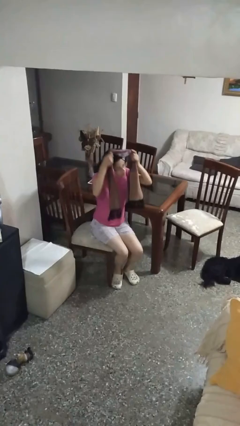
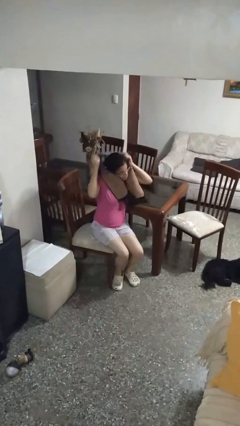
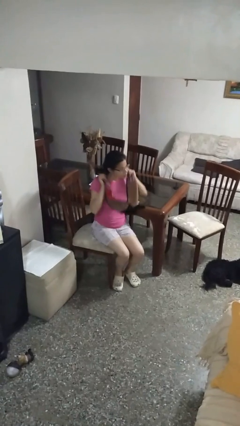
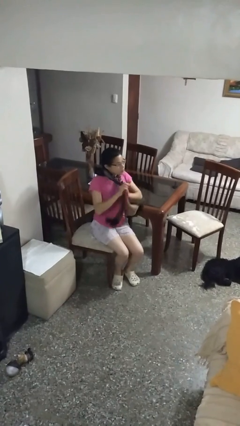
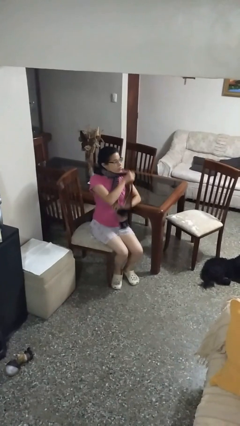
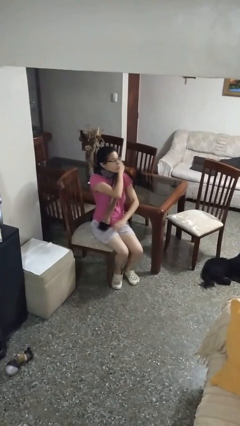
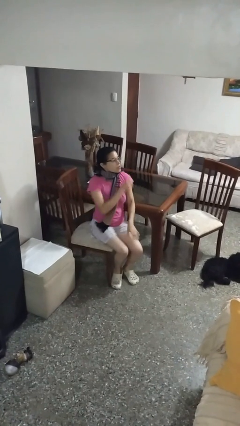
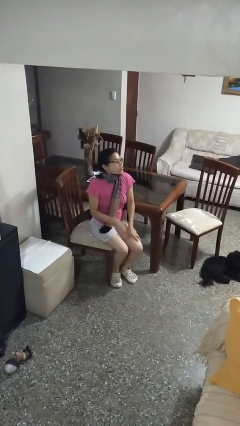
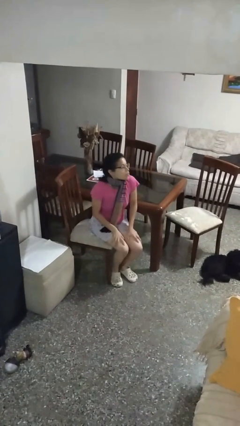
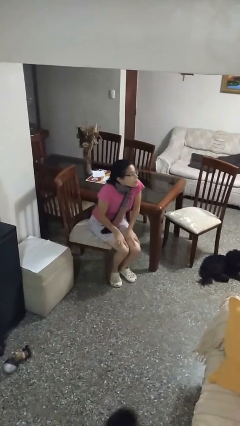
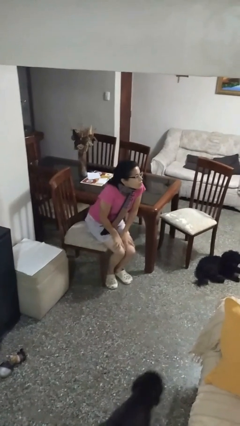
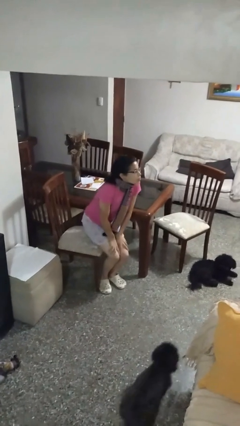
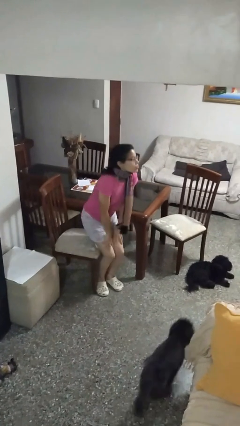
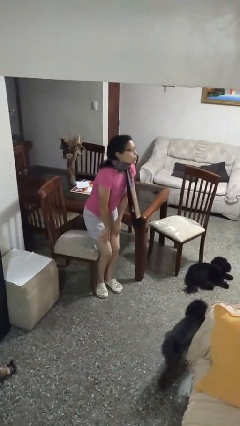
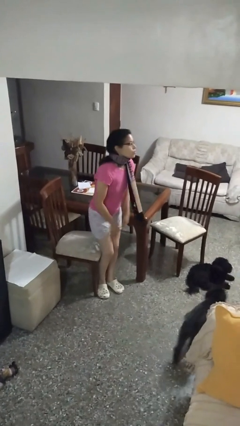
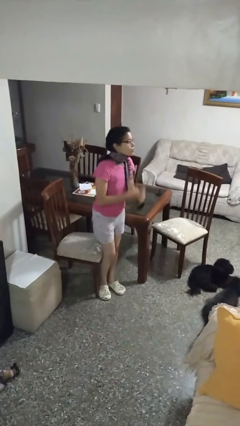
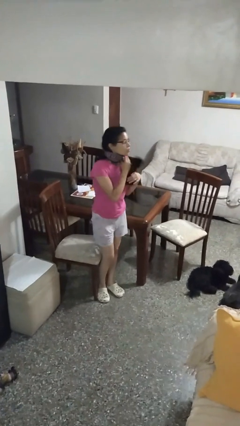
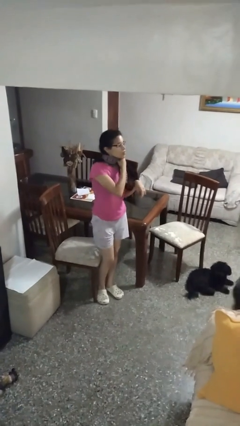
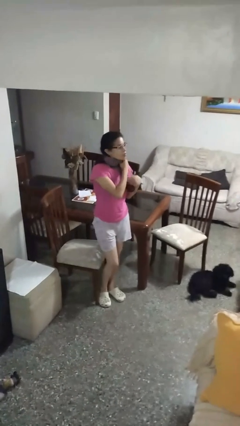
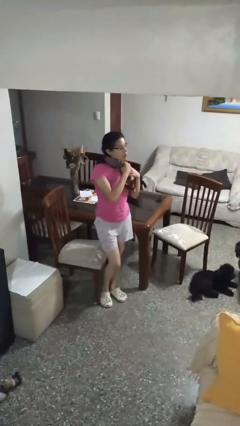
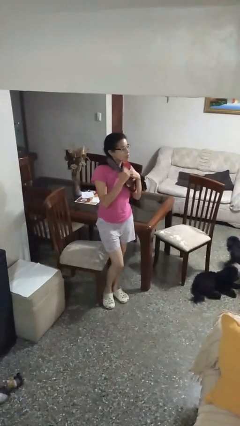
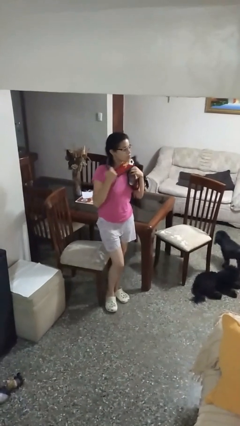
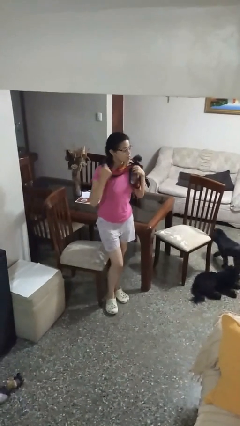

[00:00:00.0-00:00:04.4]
person puts on scarf

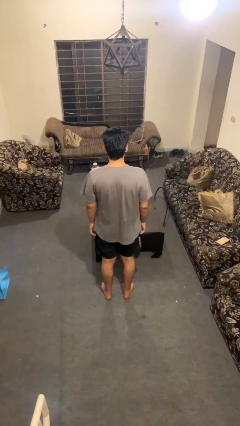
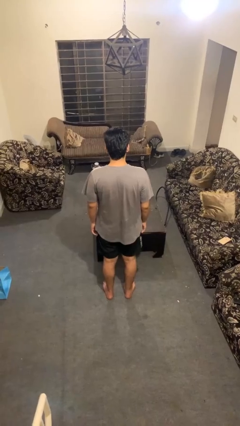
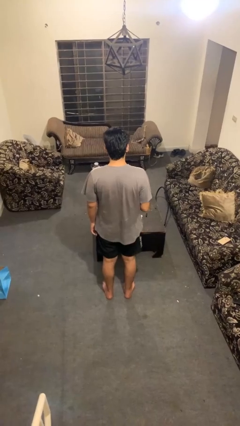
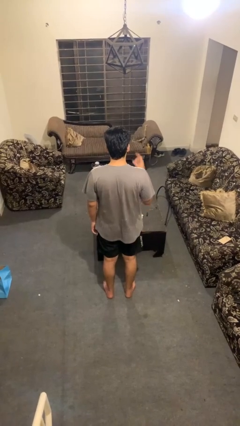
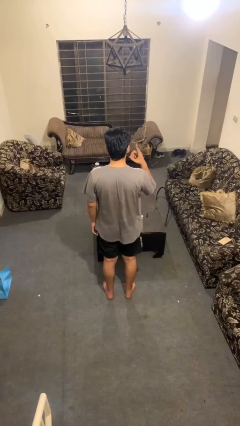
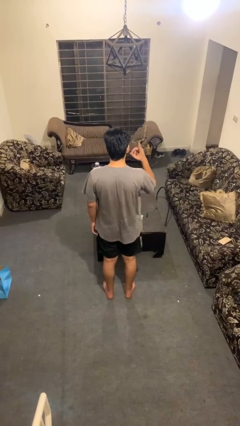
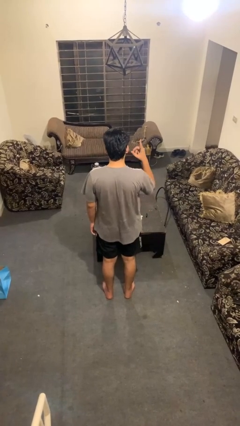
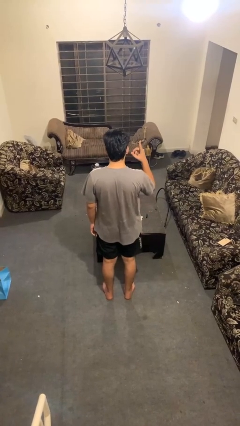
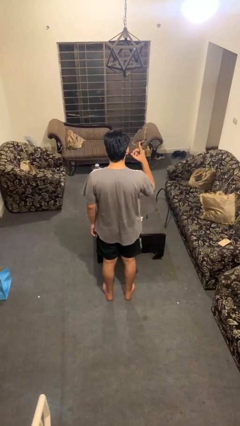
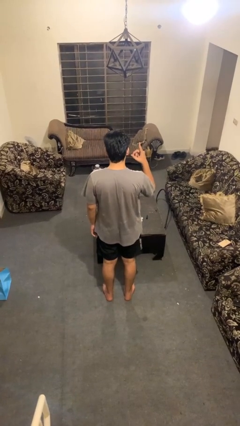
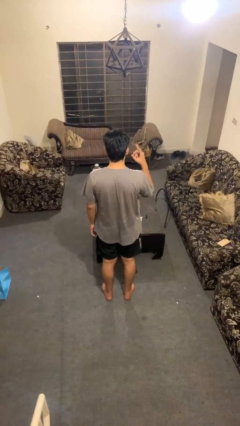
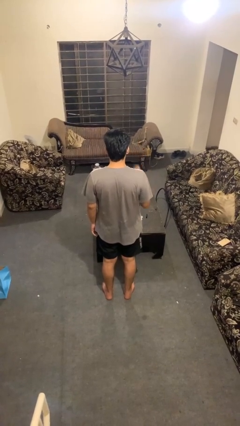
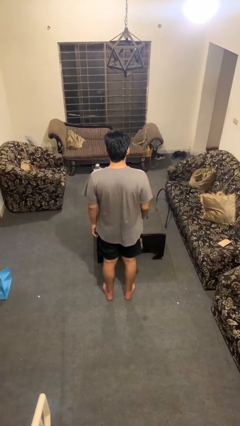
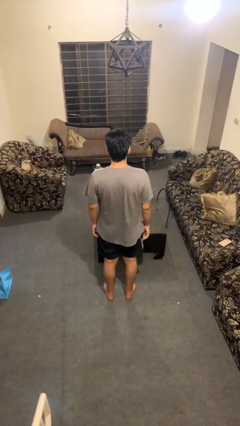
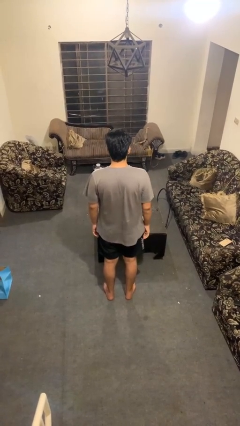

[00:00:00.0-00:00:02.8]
person gestures number one

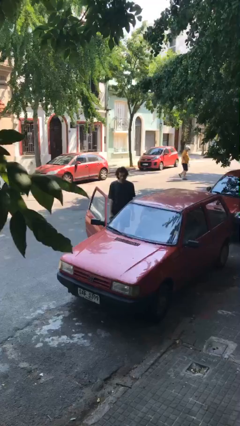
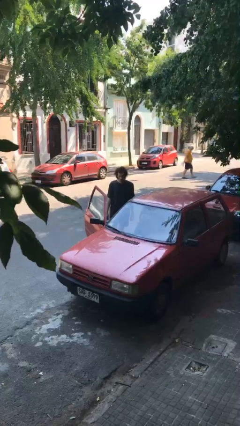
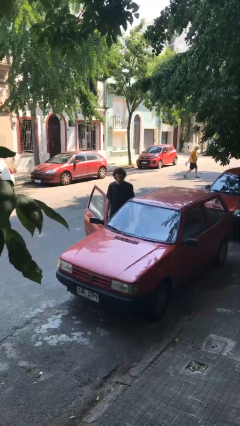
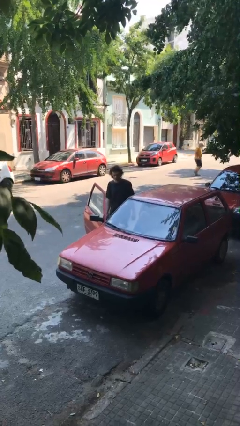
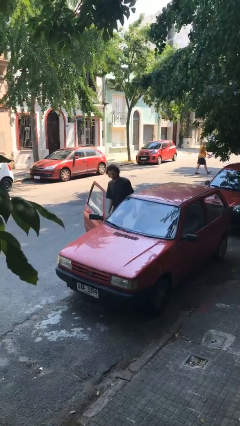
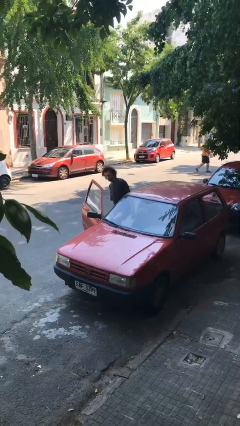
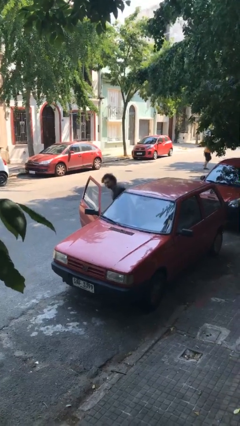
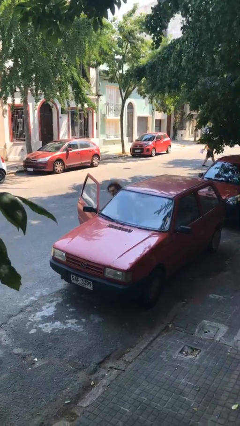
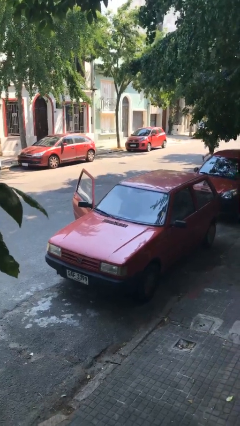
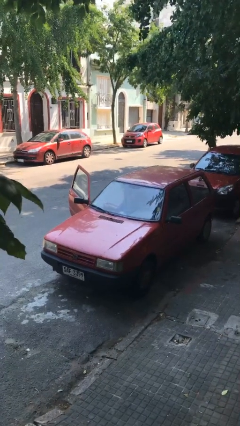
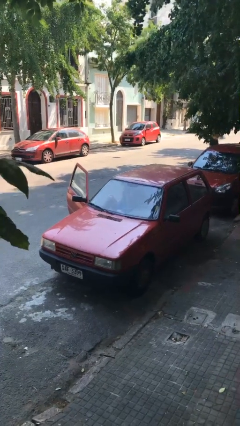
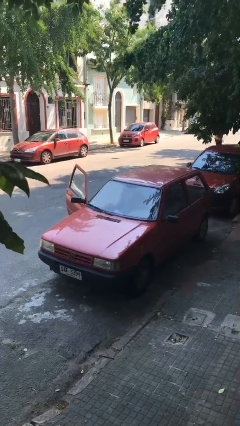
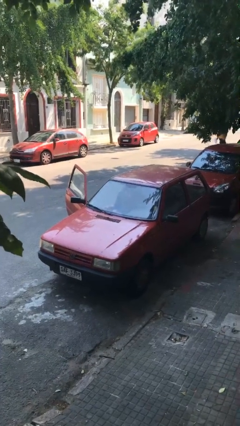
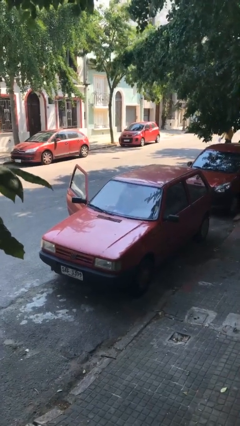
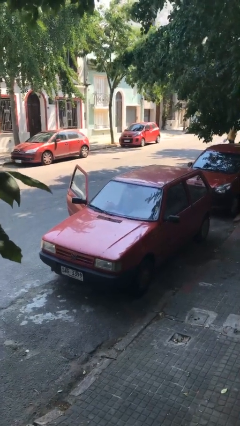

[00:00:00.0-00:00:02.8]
person enters car

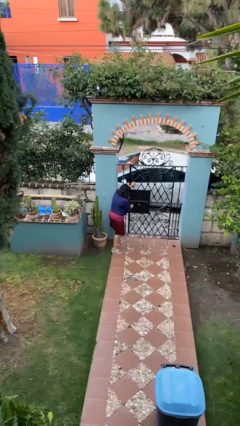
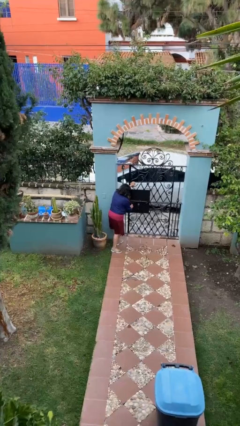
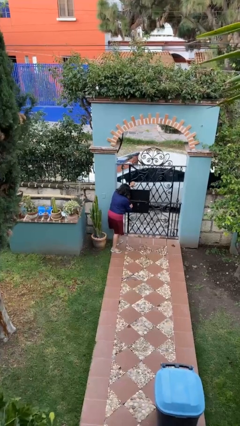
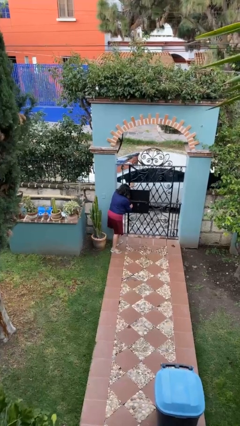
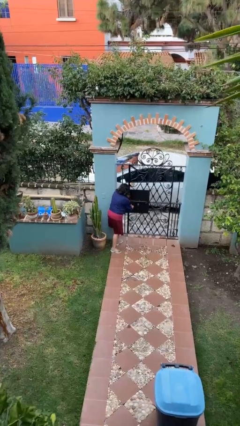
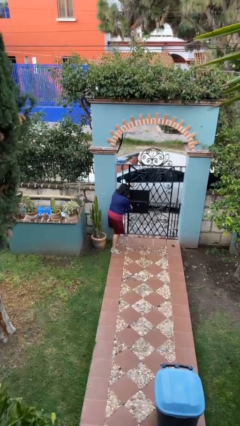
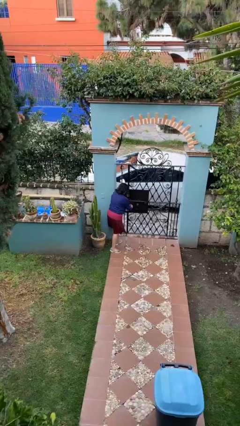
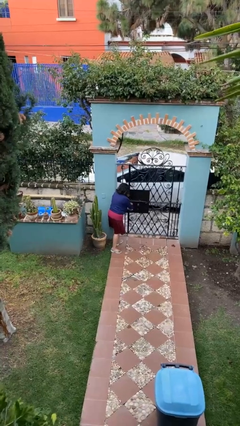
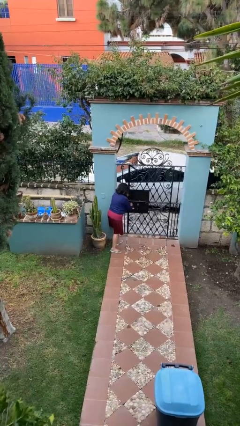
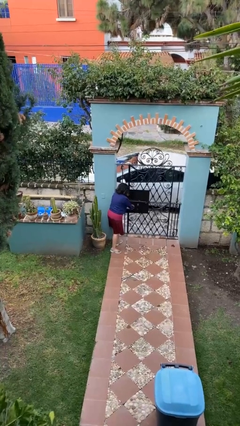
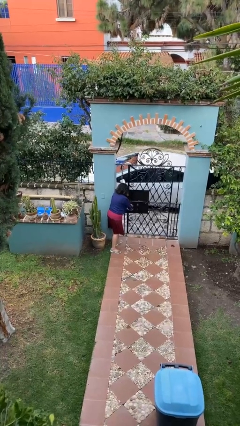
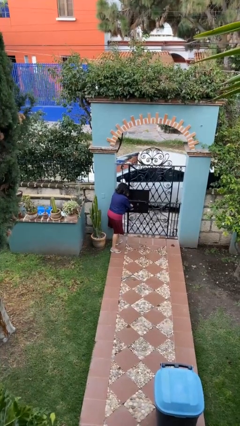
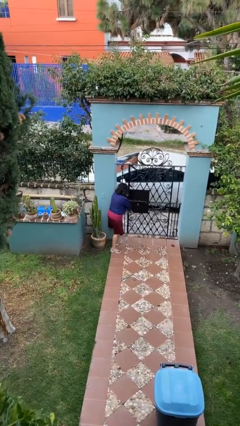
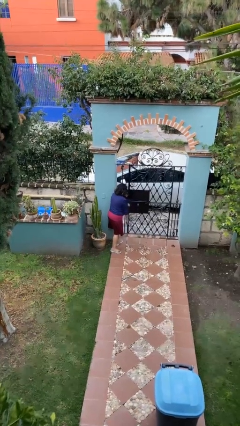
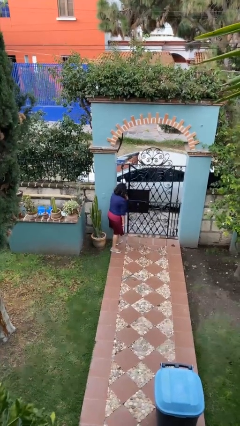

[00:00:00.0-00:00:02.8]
person locks door with keys

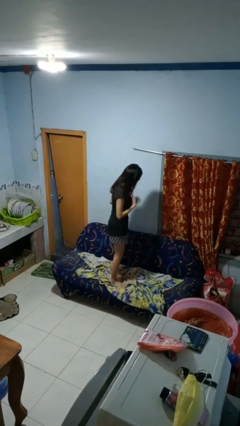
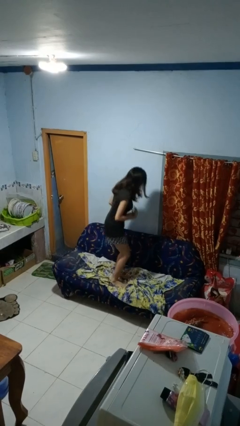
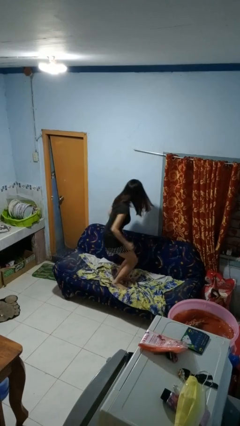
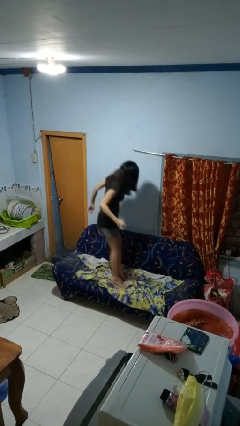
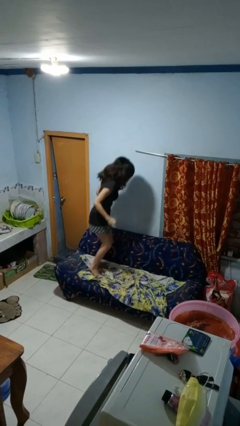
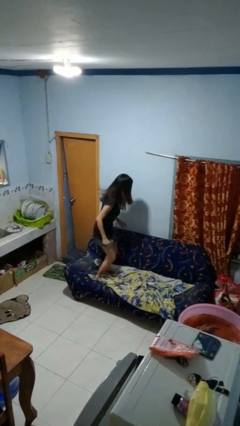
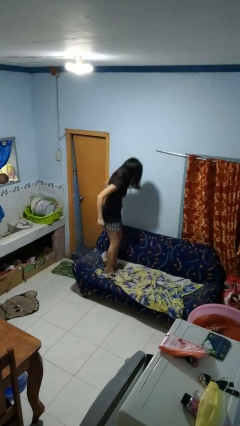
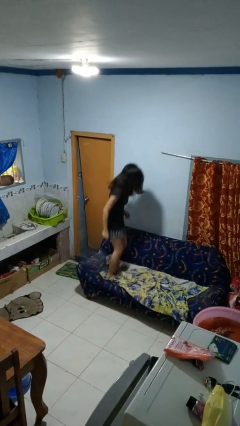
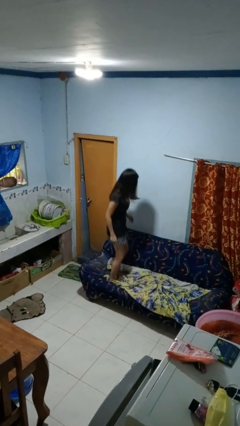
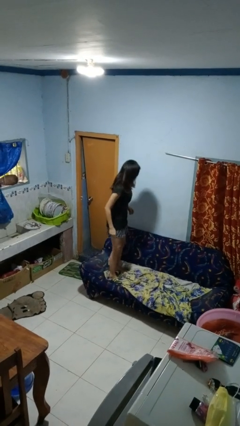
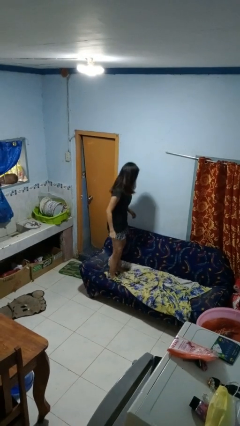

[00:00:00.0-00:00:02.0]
person jumps on couch

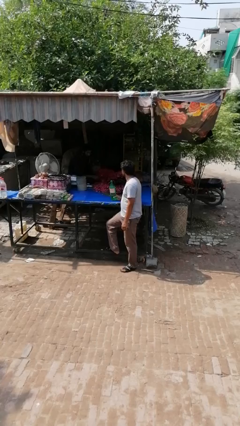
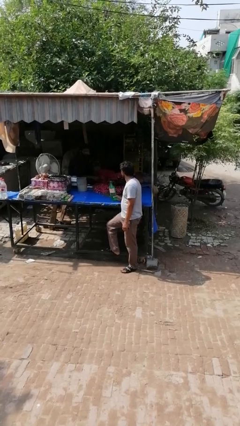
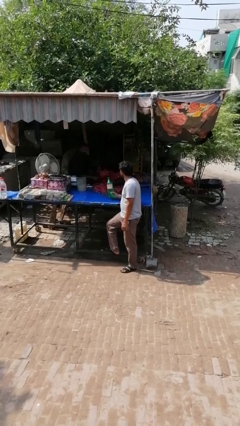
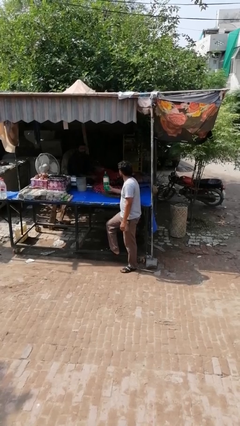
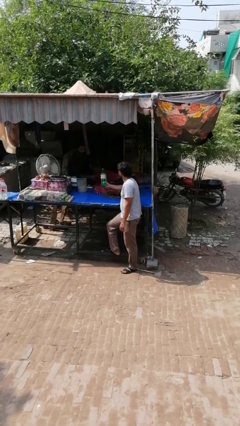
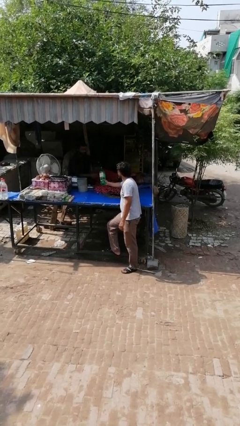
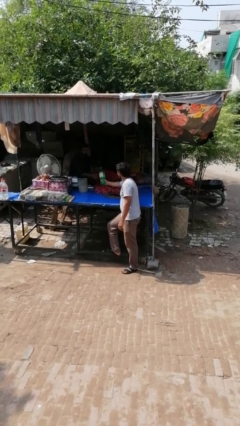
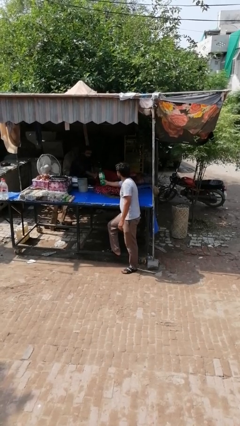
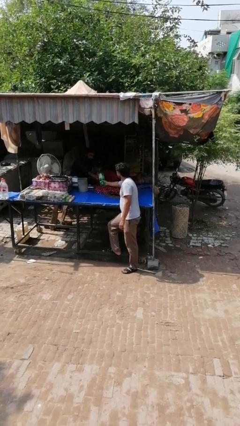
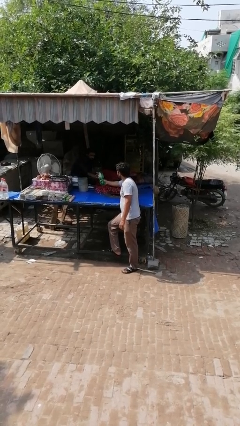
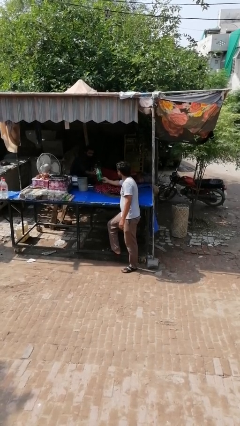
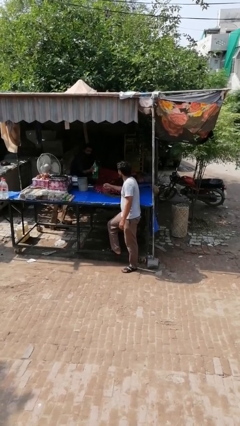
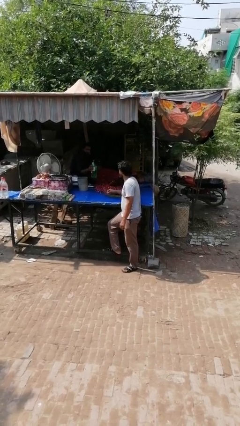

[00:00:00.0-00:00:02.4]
person transfers object to person
